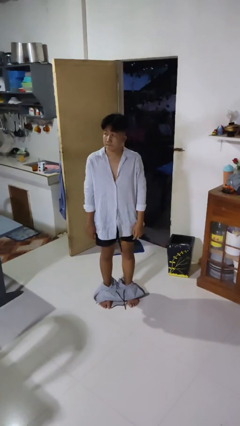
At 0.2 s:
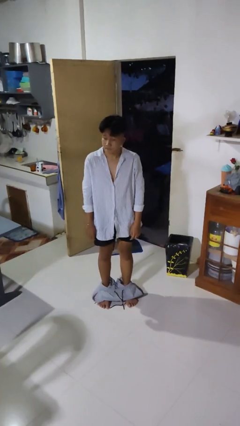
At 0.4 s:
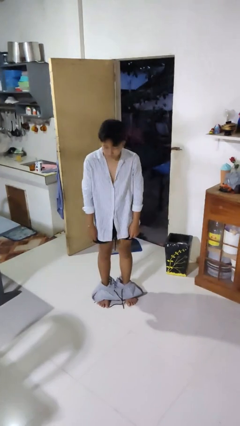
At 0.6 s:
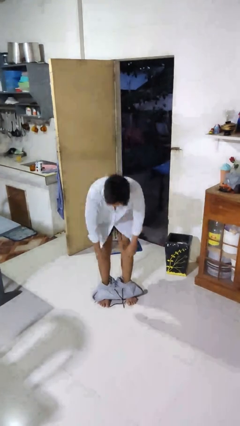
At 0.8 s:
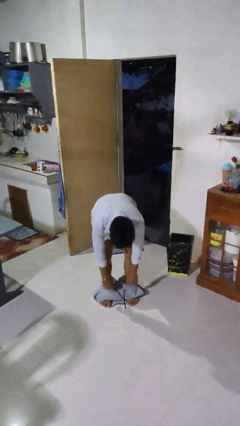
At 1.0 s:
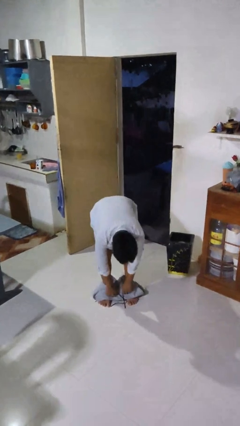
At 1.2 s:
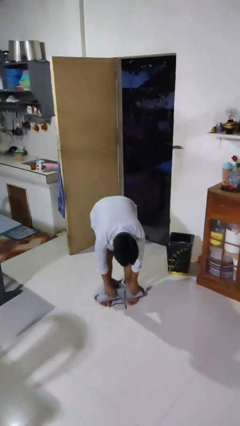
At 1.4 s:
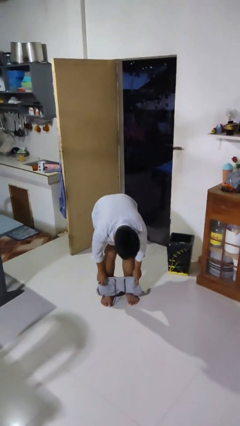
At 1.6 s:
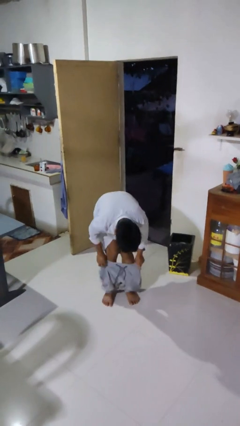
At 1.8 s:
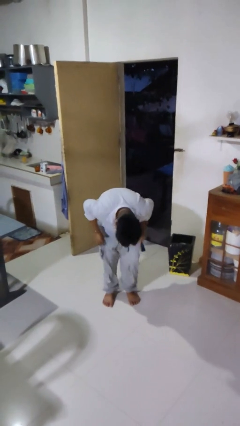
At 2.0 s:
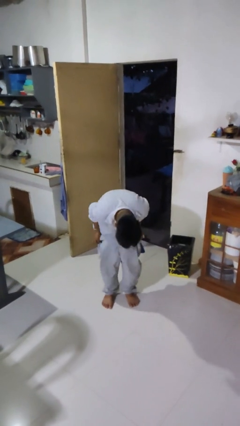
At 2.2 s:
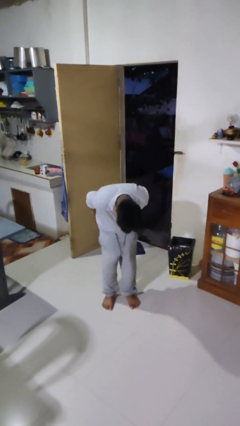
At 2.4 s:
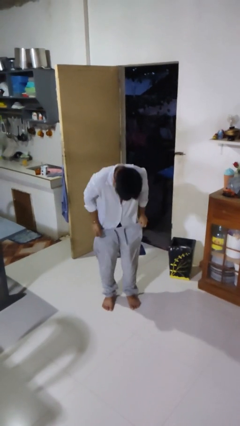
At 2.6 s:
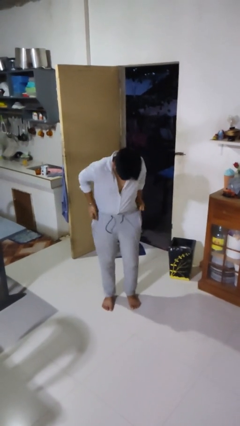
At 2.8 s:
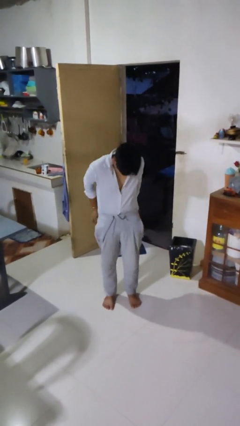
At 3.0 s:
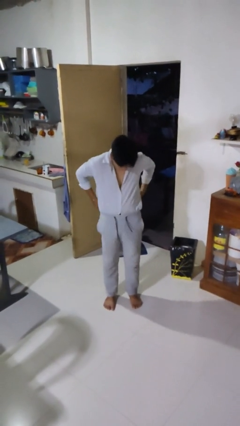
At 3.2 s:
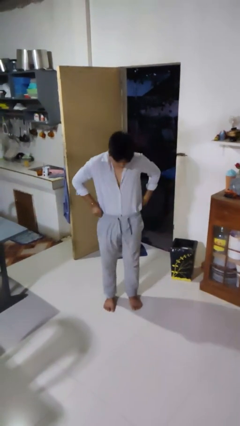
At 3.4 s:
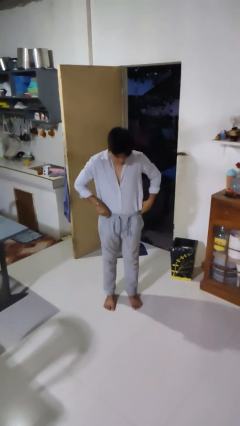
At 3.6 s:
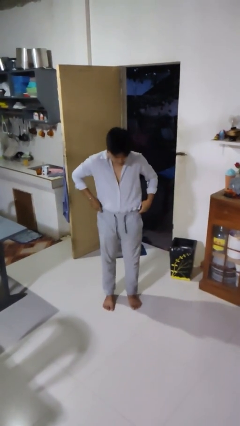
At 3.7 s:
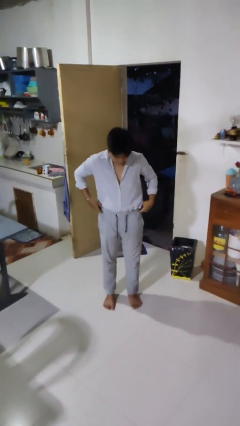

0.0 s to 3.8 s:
person puts on pants

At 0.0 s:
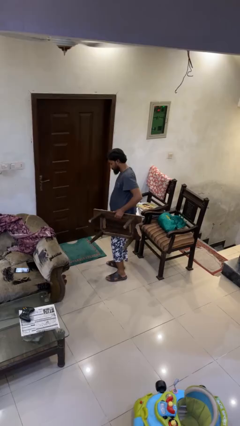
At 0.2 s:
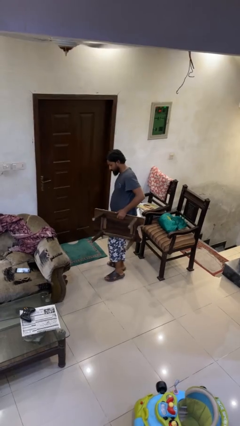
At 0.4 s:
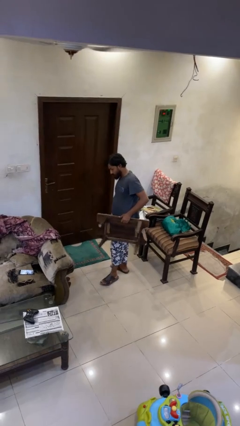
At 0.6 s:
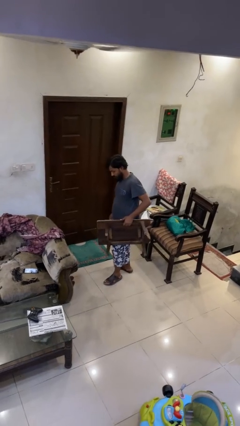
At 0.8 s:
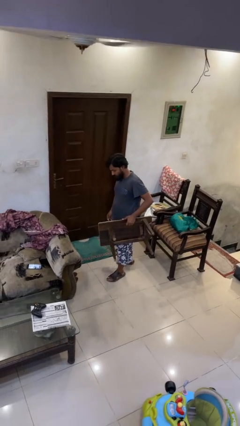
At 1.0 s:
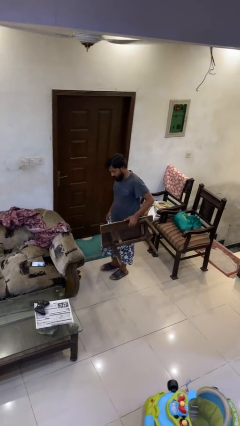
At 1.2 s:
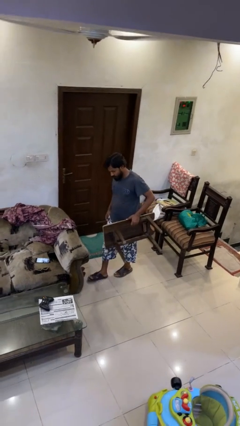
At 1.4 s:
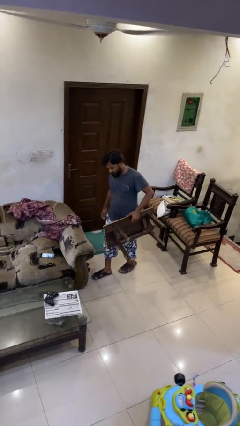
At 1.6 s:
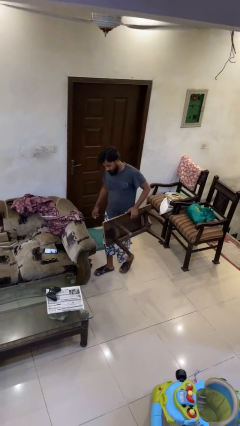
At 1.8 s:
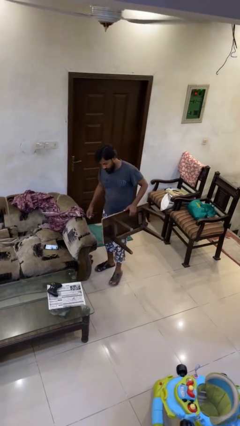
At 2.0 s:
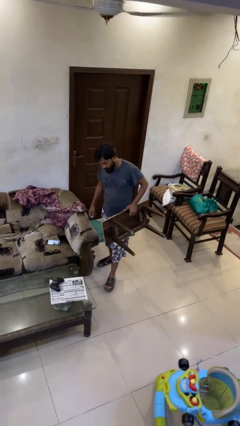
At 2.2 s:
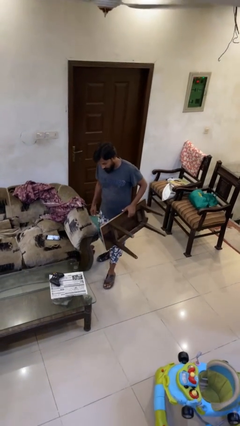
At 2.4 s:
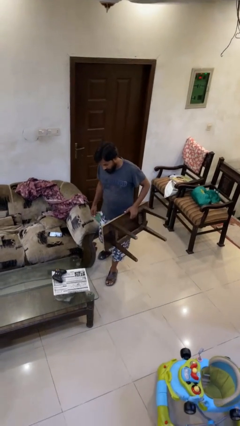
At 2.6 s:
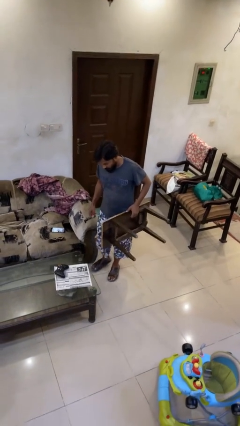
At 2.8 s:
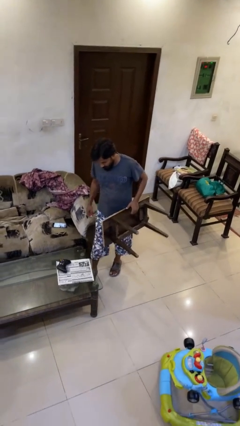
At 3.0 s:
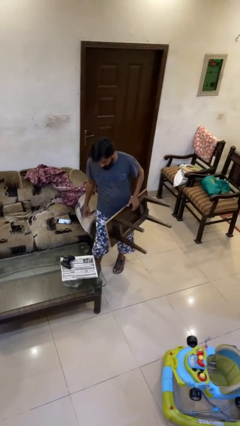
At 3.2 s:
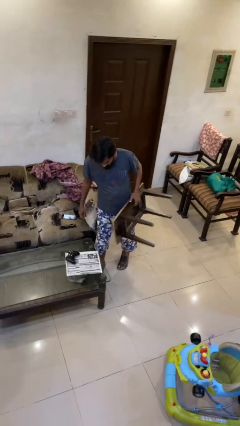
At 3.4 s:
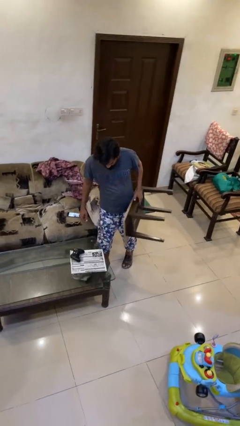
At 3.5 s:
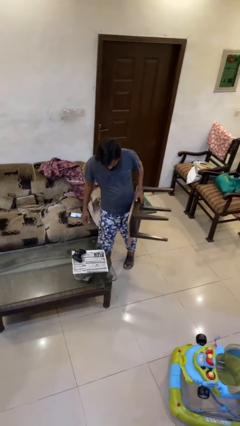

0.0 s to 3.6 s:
person carries furniture

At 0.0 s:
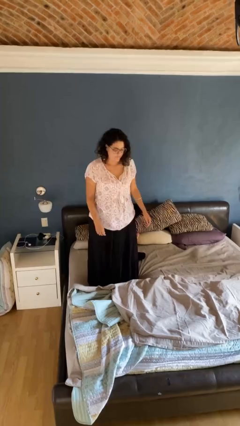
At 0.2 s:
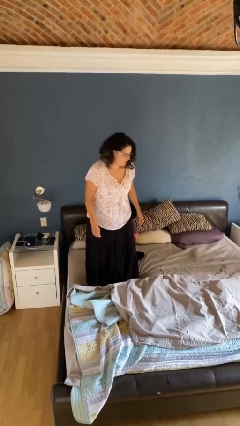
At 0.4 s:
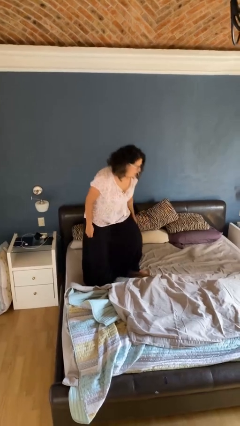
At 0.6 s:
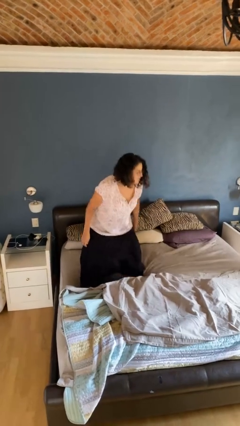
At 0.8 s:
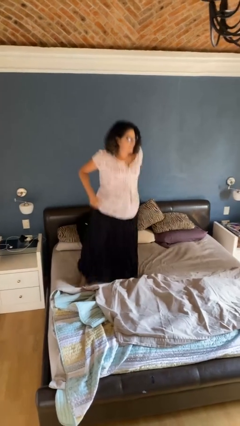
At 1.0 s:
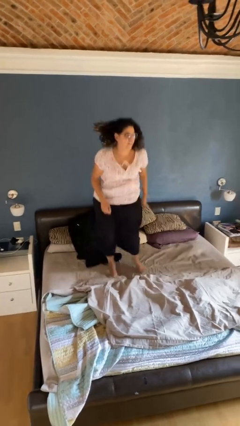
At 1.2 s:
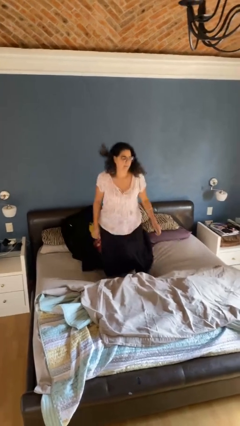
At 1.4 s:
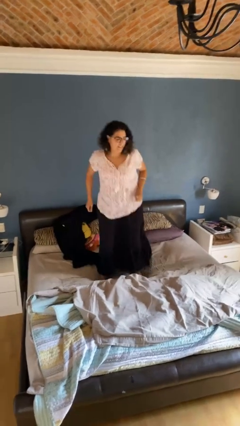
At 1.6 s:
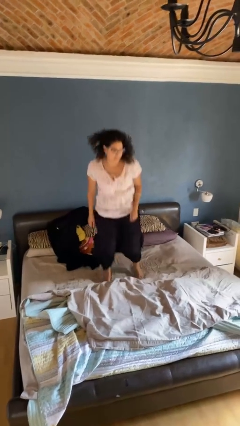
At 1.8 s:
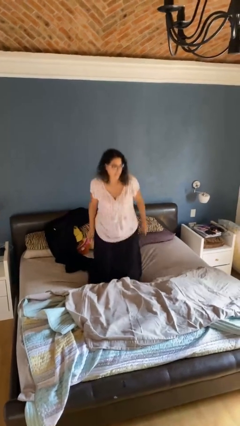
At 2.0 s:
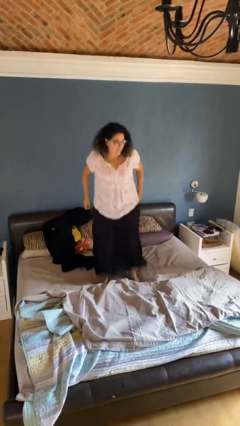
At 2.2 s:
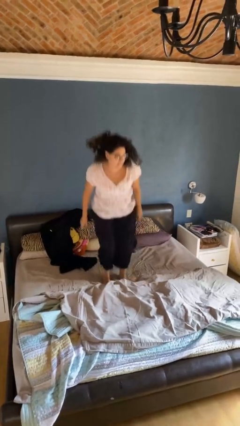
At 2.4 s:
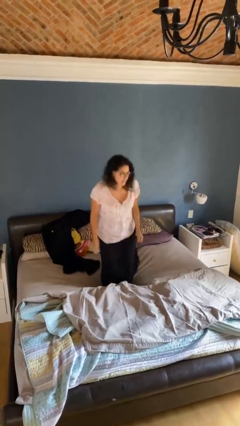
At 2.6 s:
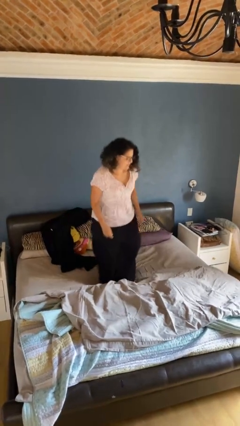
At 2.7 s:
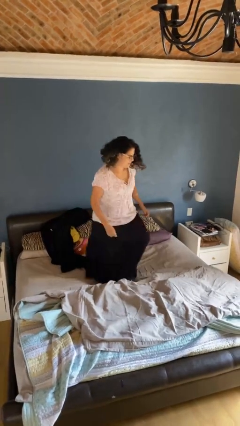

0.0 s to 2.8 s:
person jumps on bed

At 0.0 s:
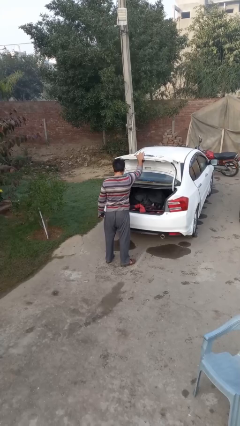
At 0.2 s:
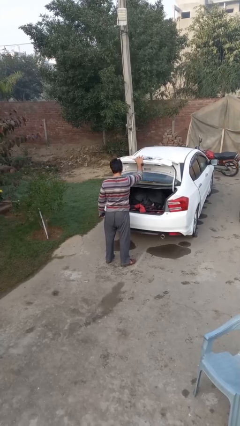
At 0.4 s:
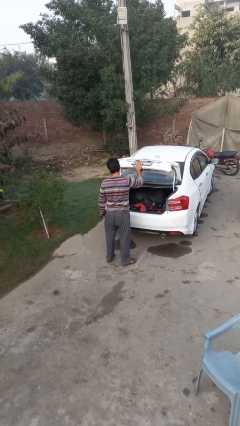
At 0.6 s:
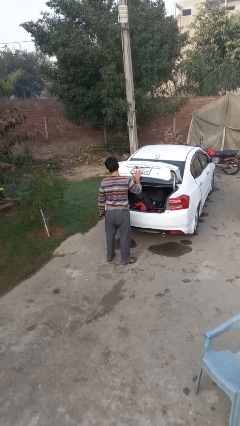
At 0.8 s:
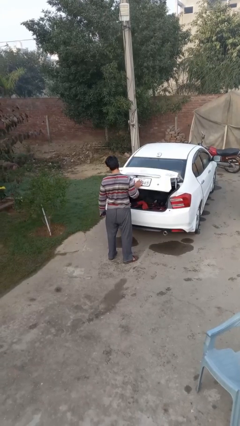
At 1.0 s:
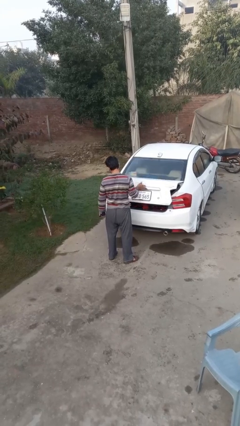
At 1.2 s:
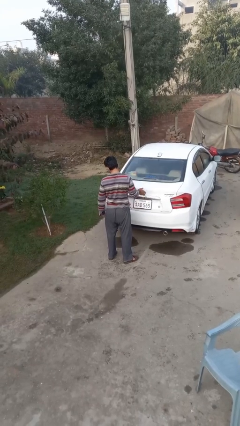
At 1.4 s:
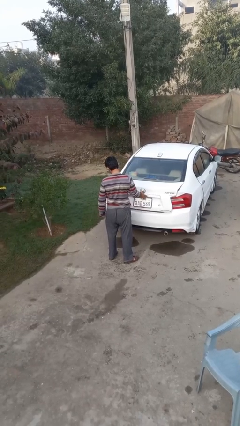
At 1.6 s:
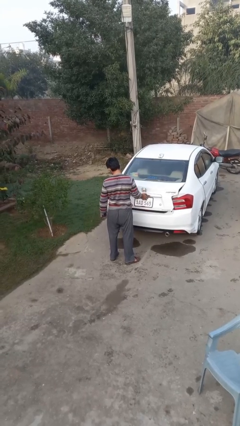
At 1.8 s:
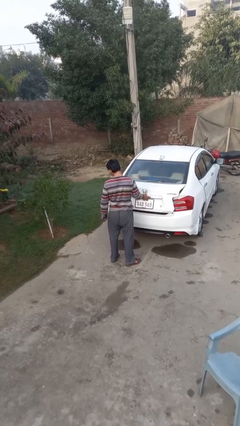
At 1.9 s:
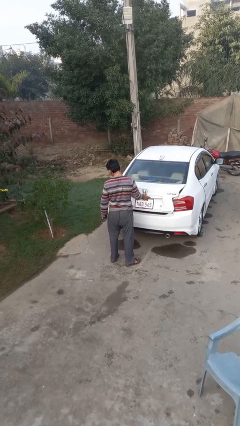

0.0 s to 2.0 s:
person closes car trunk

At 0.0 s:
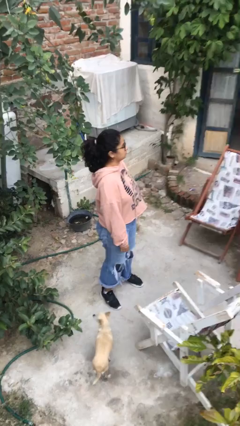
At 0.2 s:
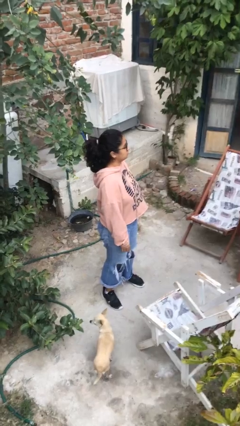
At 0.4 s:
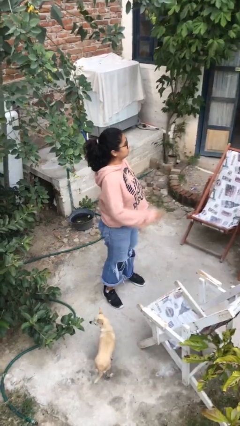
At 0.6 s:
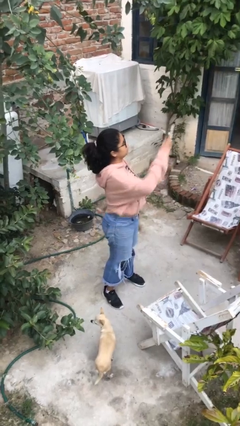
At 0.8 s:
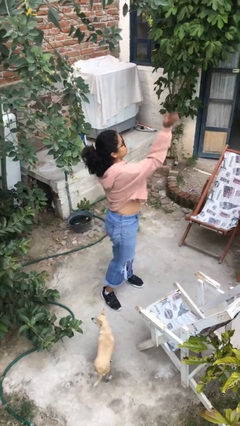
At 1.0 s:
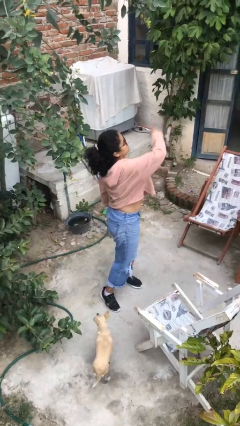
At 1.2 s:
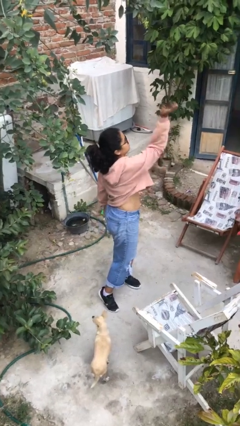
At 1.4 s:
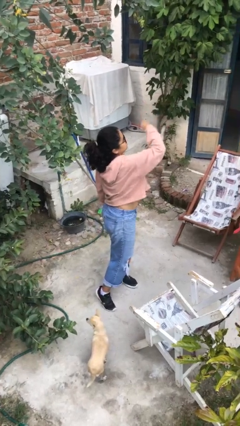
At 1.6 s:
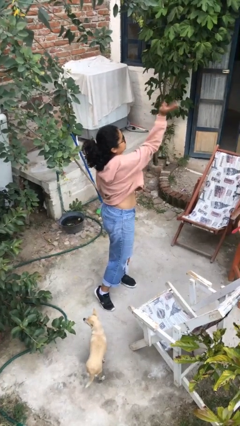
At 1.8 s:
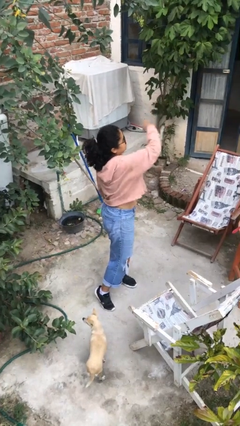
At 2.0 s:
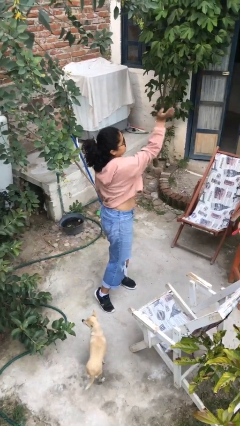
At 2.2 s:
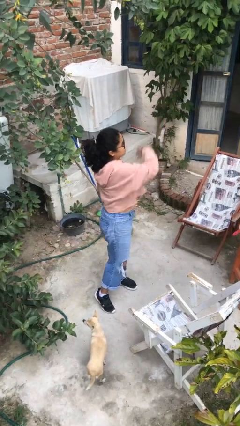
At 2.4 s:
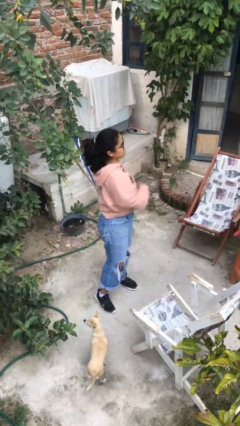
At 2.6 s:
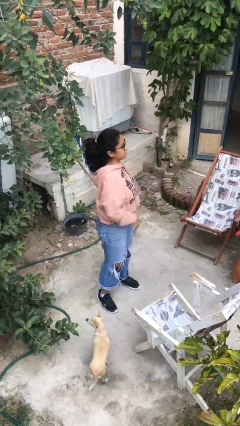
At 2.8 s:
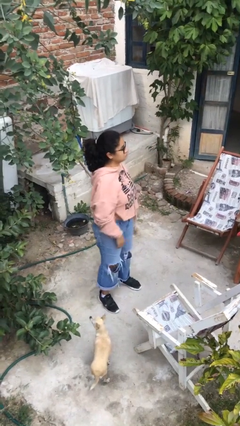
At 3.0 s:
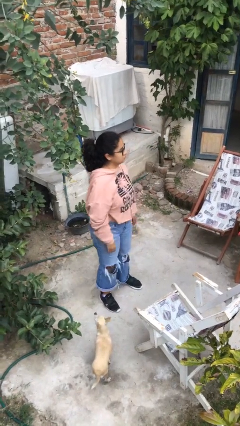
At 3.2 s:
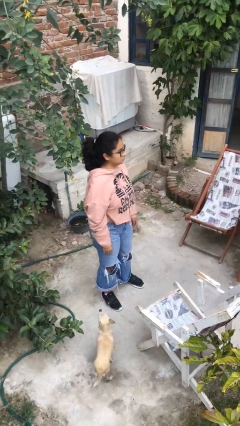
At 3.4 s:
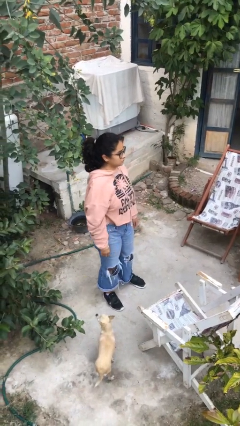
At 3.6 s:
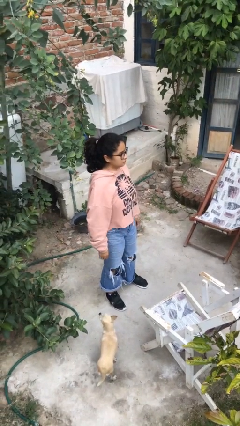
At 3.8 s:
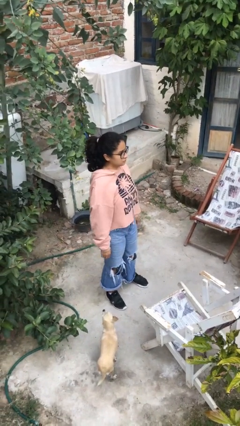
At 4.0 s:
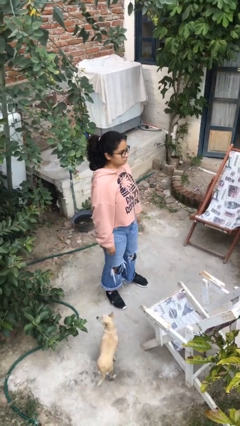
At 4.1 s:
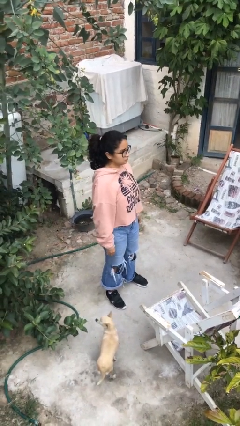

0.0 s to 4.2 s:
person punches

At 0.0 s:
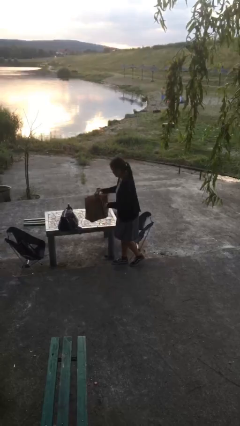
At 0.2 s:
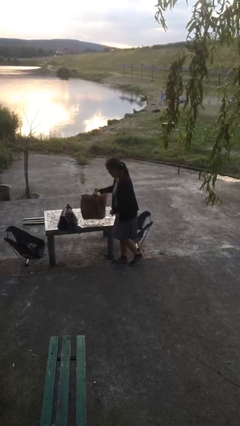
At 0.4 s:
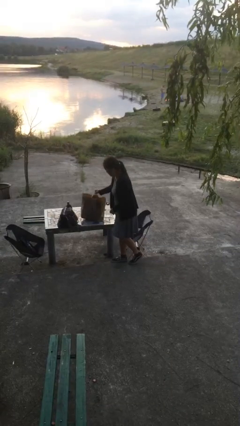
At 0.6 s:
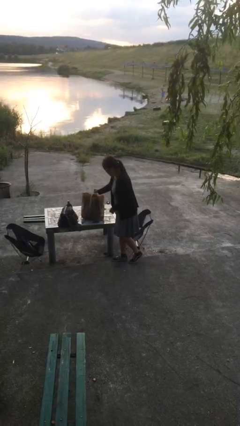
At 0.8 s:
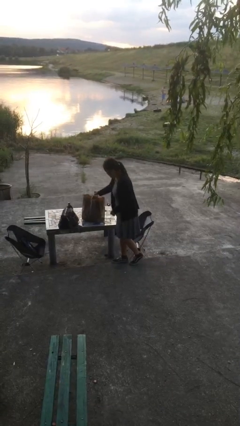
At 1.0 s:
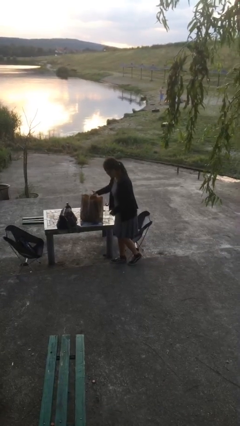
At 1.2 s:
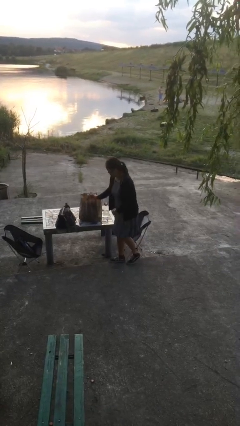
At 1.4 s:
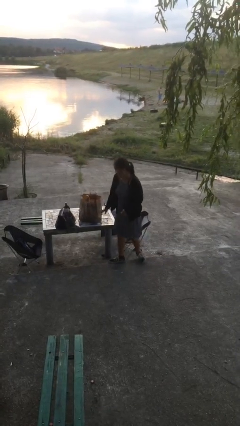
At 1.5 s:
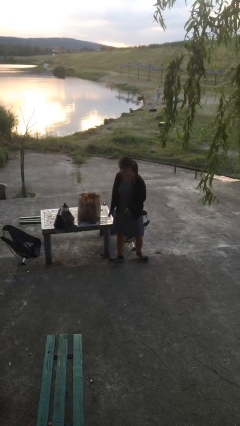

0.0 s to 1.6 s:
person puts down object on table
